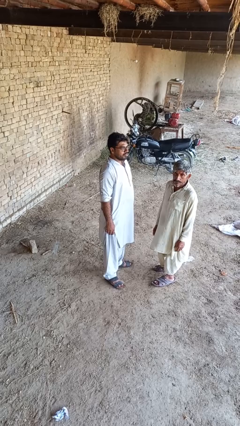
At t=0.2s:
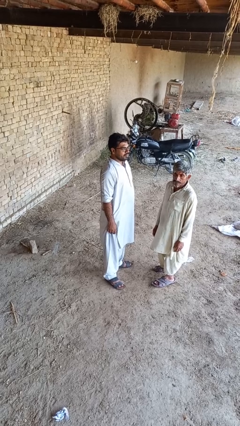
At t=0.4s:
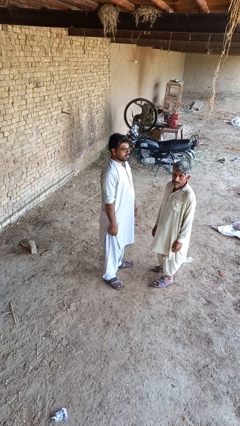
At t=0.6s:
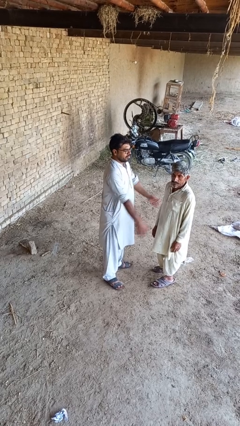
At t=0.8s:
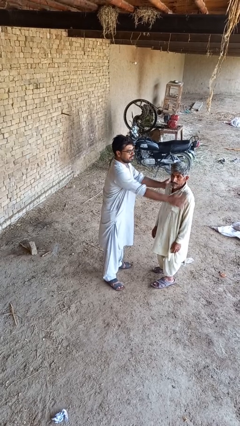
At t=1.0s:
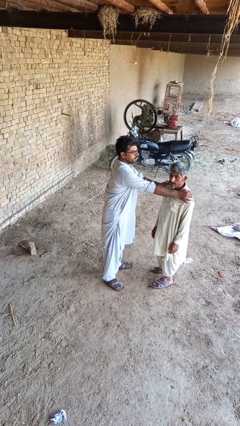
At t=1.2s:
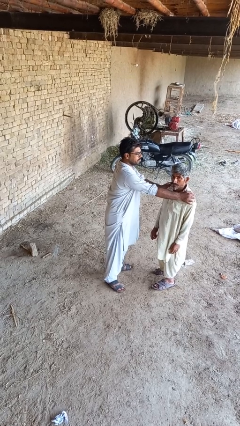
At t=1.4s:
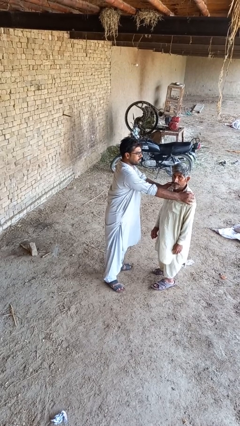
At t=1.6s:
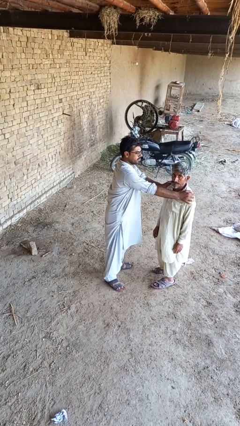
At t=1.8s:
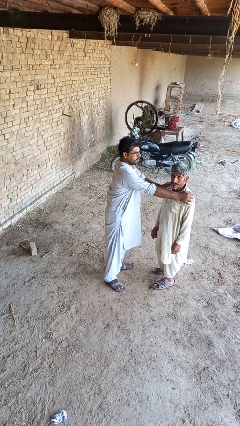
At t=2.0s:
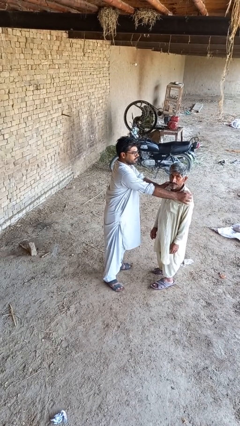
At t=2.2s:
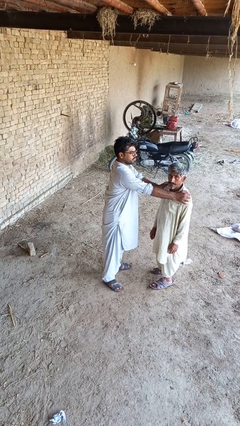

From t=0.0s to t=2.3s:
person grabs person by shoulder

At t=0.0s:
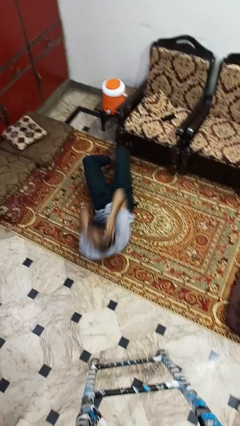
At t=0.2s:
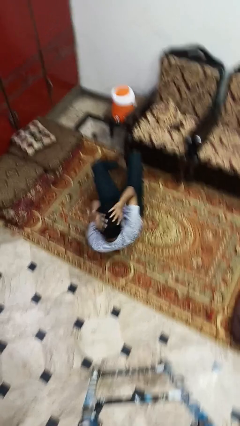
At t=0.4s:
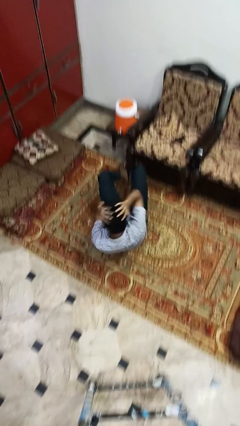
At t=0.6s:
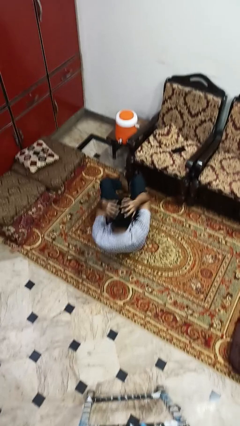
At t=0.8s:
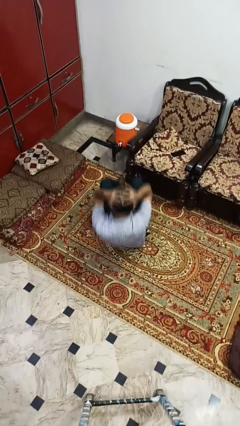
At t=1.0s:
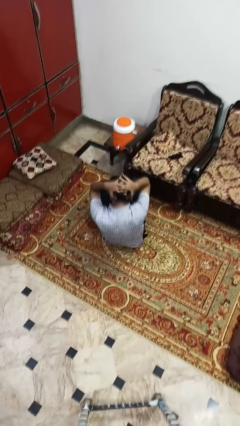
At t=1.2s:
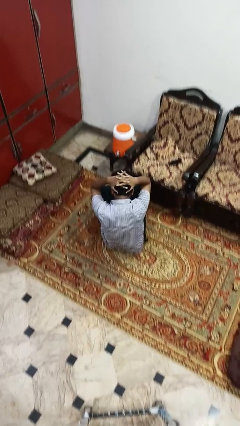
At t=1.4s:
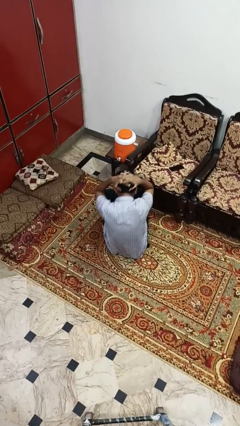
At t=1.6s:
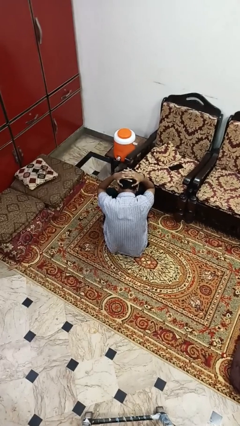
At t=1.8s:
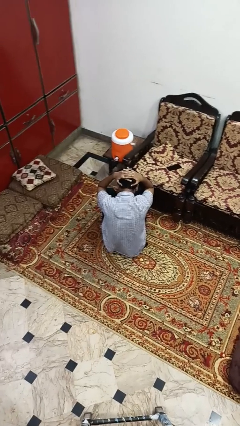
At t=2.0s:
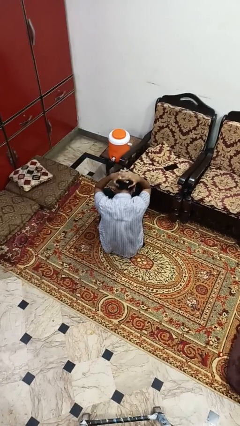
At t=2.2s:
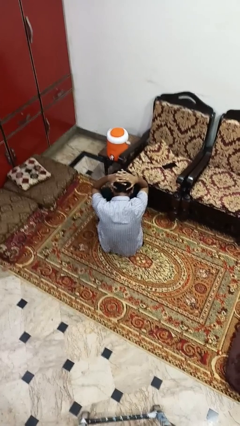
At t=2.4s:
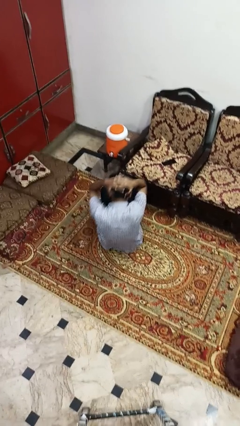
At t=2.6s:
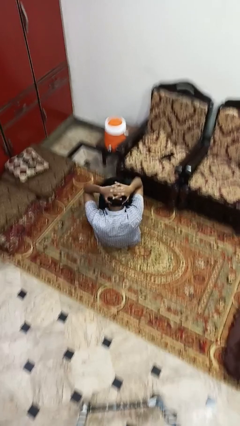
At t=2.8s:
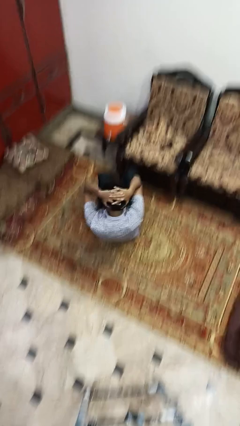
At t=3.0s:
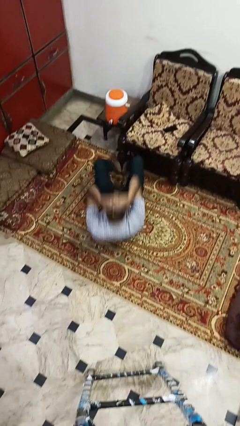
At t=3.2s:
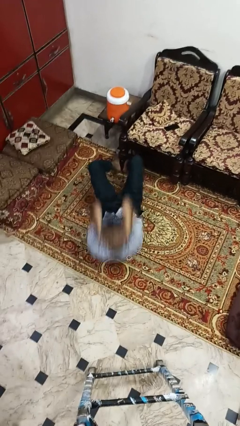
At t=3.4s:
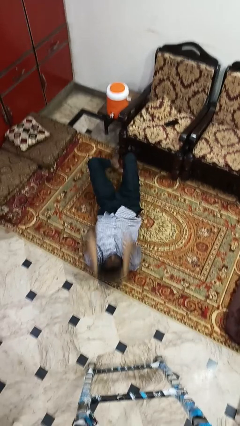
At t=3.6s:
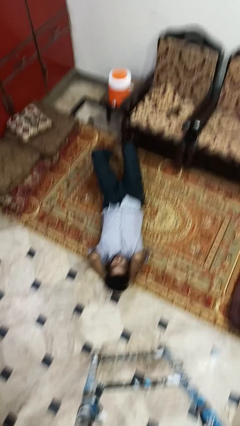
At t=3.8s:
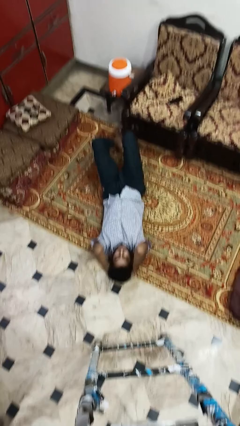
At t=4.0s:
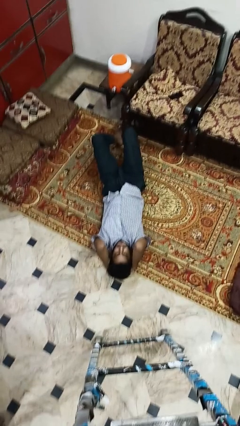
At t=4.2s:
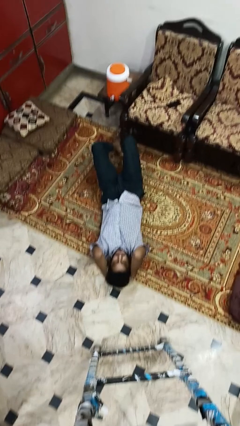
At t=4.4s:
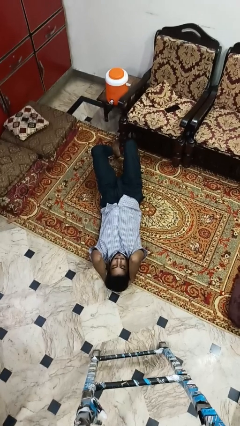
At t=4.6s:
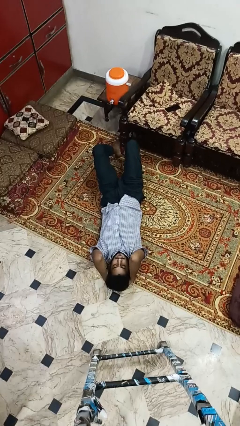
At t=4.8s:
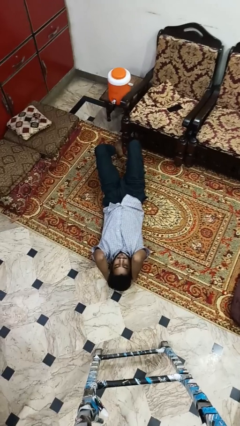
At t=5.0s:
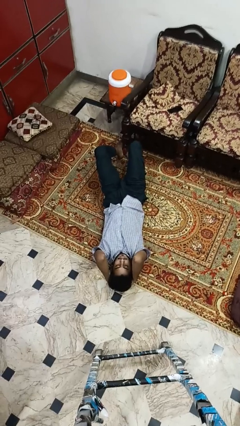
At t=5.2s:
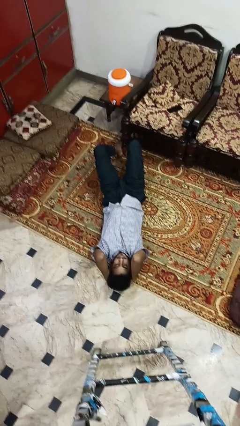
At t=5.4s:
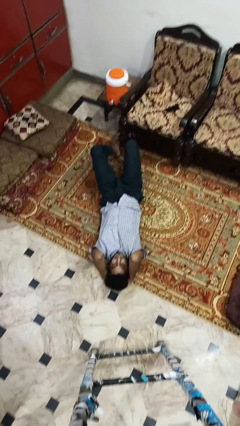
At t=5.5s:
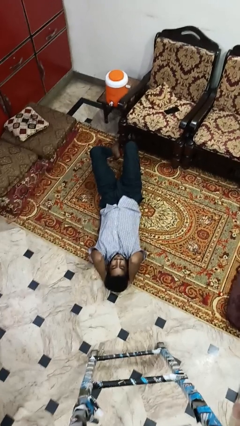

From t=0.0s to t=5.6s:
person exercises with situp

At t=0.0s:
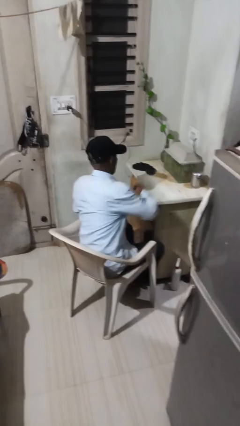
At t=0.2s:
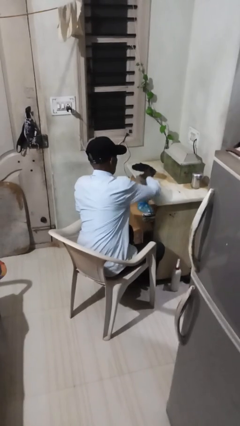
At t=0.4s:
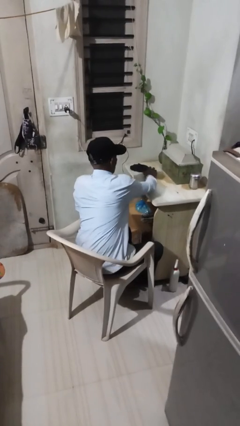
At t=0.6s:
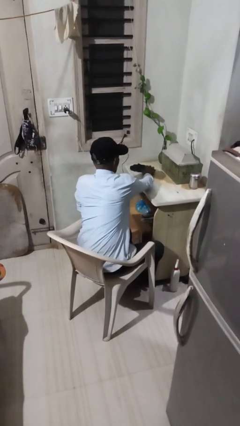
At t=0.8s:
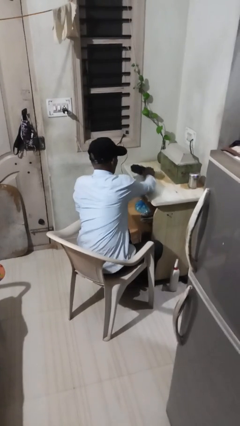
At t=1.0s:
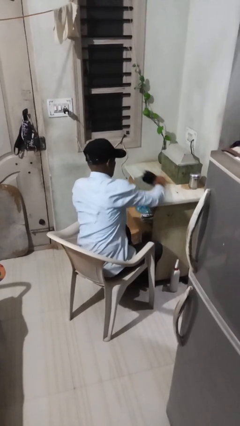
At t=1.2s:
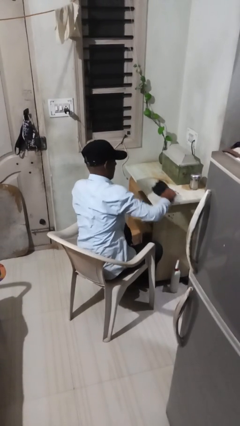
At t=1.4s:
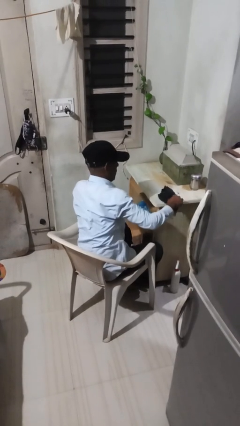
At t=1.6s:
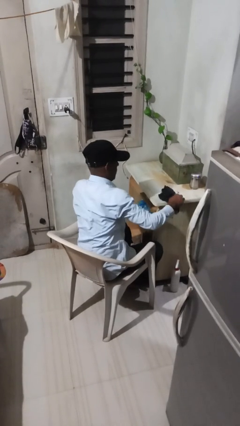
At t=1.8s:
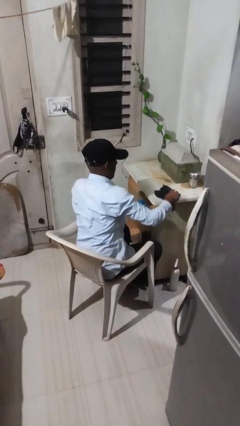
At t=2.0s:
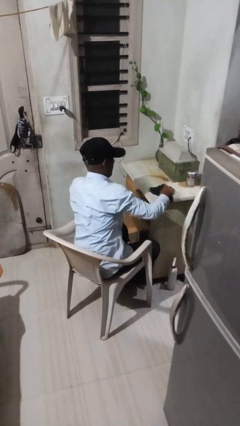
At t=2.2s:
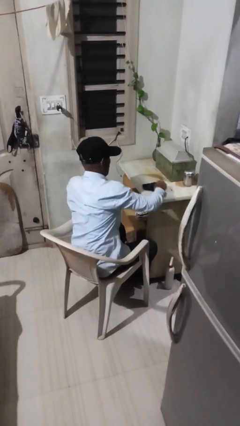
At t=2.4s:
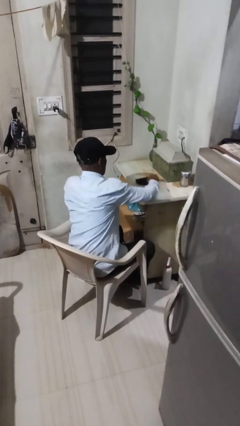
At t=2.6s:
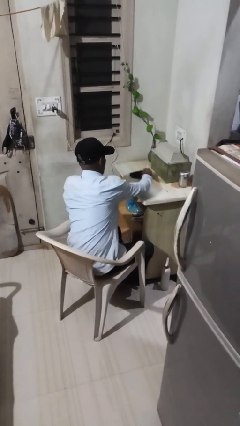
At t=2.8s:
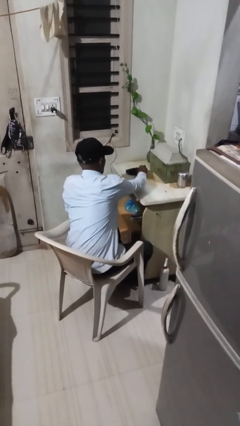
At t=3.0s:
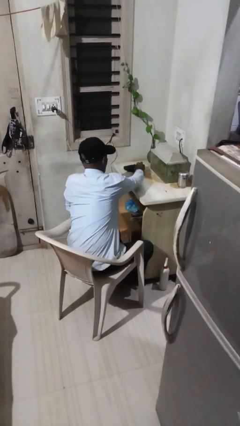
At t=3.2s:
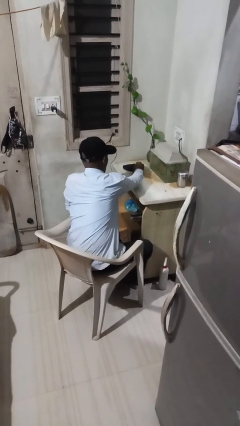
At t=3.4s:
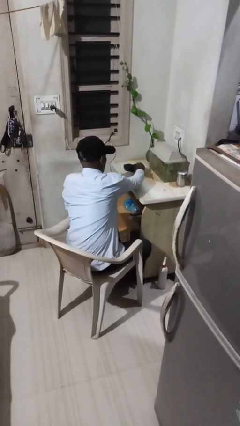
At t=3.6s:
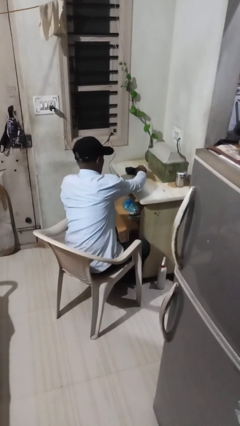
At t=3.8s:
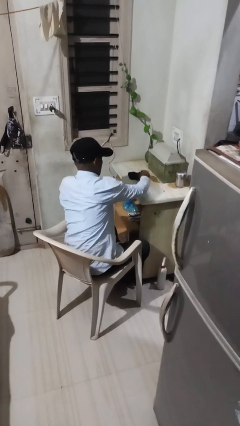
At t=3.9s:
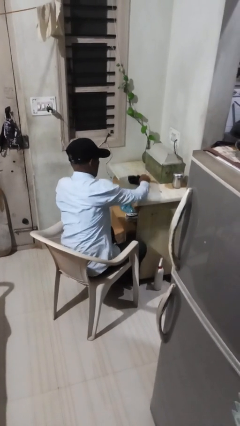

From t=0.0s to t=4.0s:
person cleans table with rag

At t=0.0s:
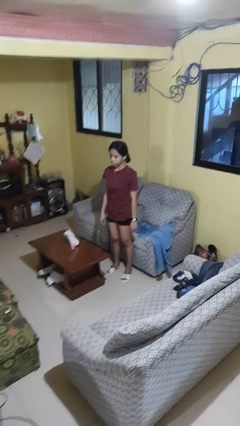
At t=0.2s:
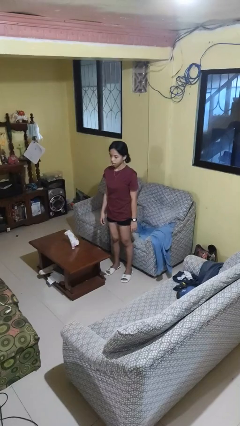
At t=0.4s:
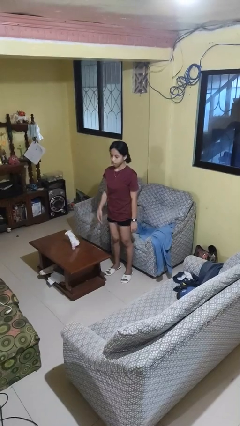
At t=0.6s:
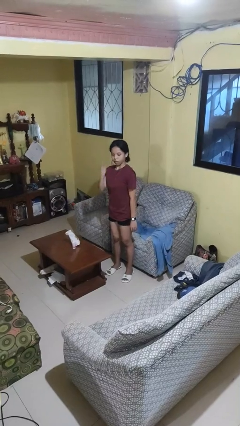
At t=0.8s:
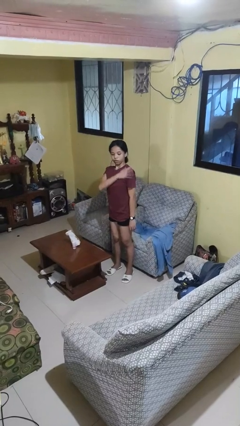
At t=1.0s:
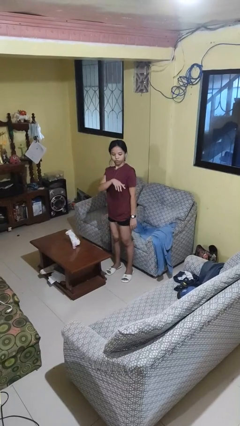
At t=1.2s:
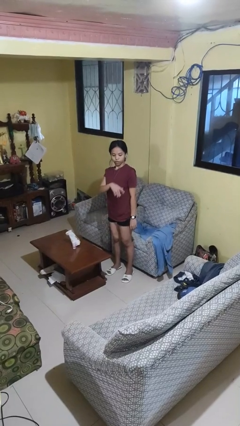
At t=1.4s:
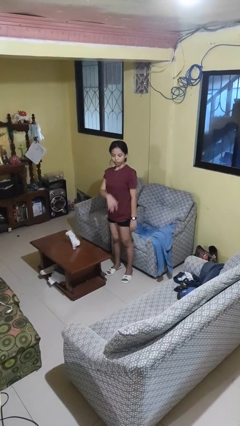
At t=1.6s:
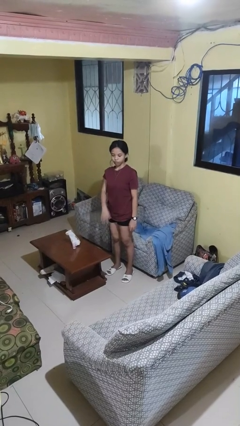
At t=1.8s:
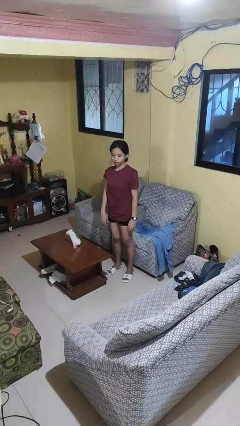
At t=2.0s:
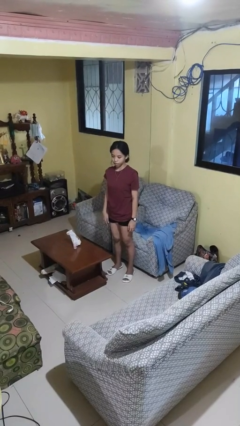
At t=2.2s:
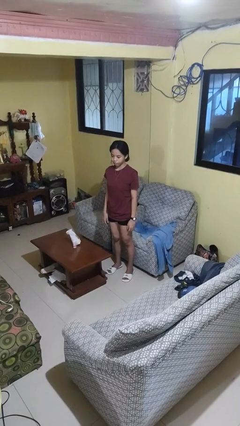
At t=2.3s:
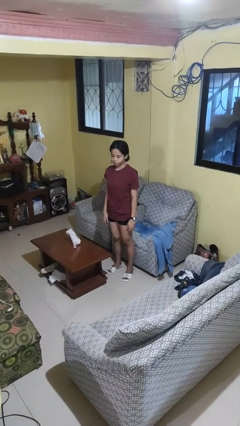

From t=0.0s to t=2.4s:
person swats bug

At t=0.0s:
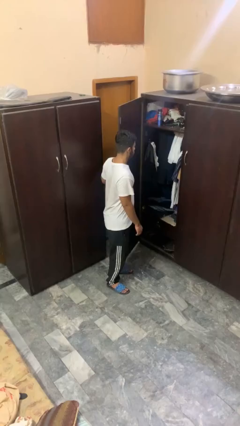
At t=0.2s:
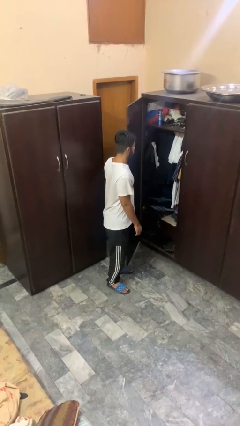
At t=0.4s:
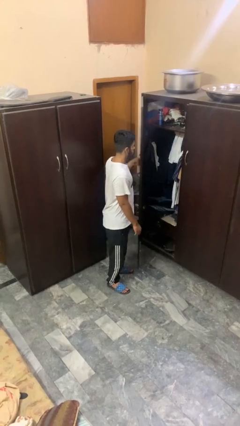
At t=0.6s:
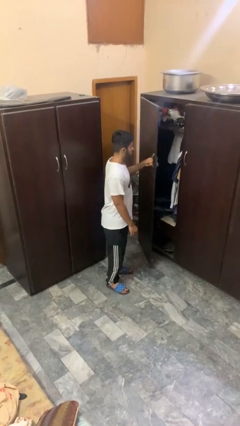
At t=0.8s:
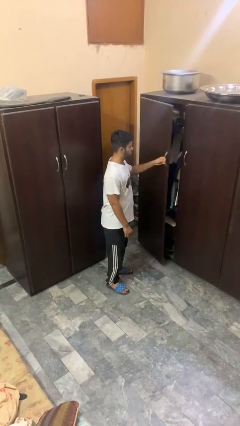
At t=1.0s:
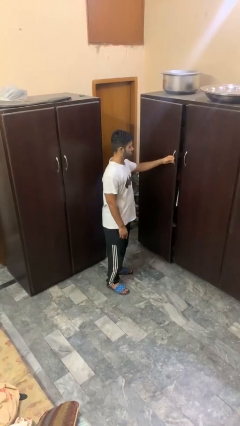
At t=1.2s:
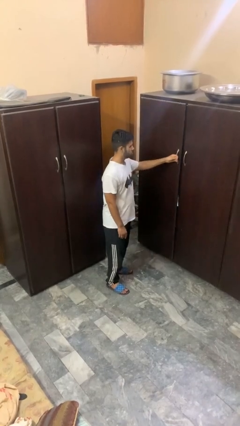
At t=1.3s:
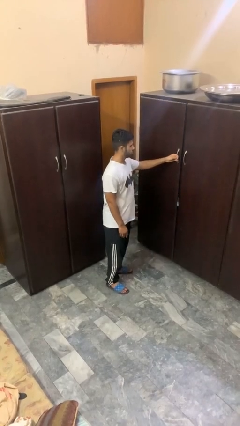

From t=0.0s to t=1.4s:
person closes closet door

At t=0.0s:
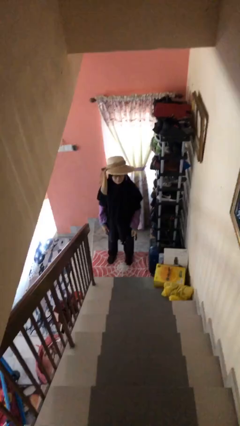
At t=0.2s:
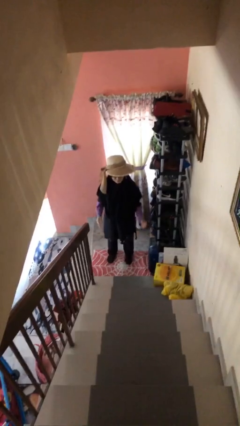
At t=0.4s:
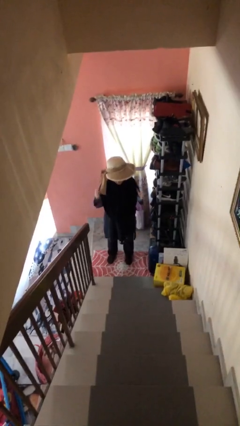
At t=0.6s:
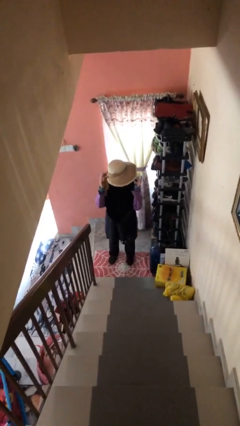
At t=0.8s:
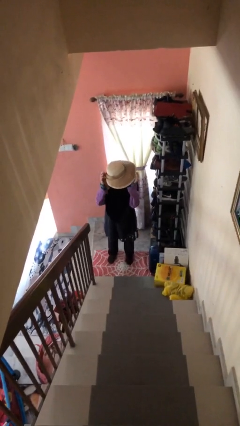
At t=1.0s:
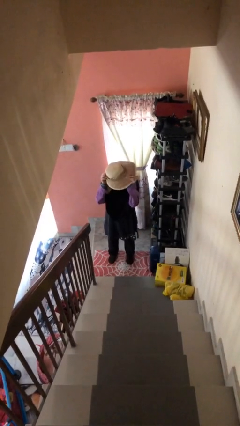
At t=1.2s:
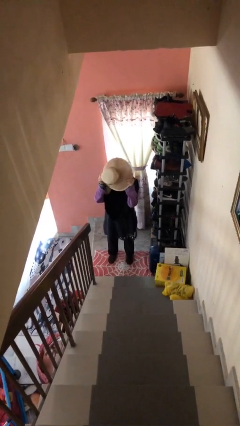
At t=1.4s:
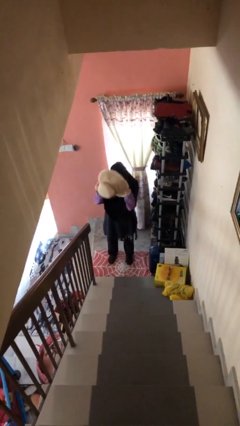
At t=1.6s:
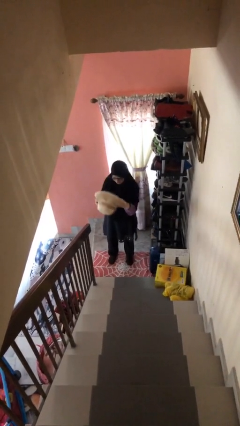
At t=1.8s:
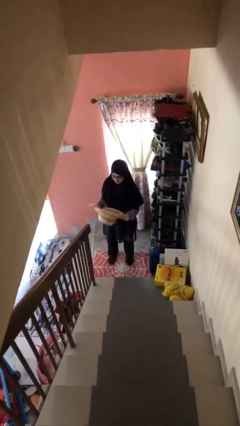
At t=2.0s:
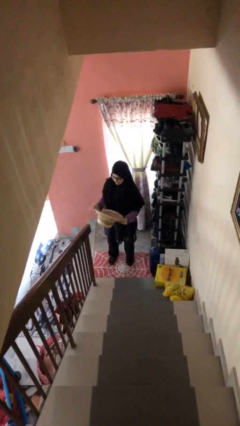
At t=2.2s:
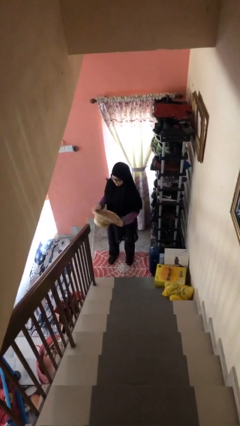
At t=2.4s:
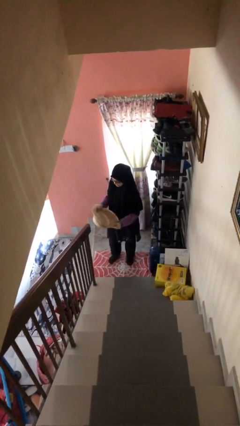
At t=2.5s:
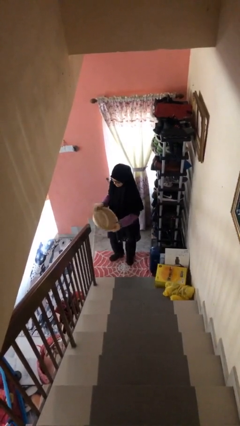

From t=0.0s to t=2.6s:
person takes off hat
